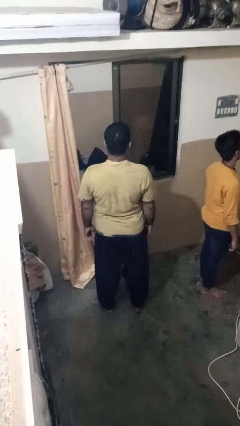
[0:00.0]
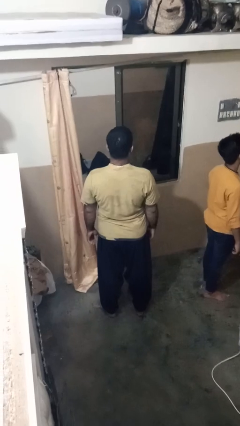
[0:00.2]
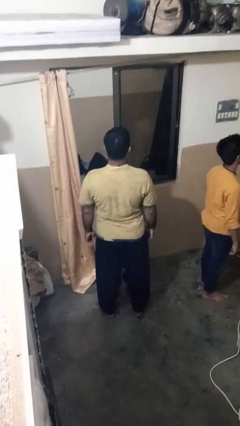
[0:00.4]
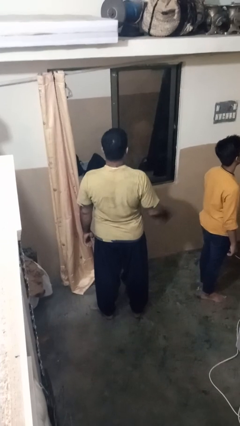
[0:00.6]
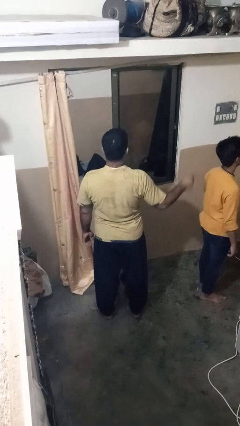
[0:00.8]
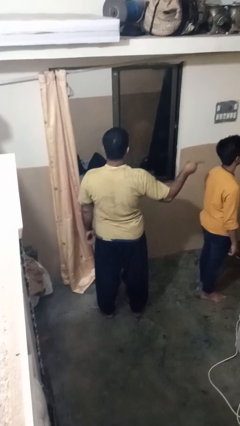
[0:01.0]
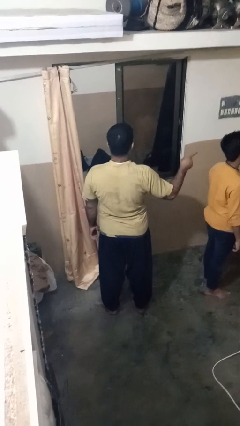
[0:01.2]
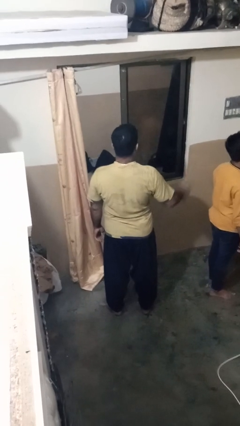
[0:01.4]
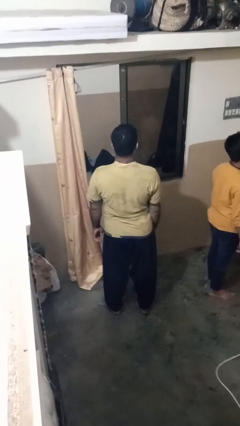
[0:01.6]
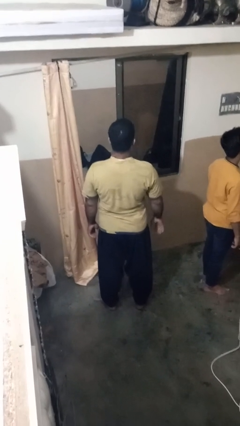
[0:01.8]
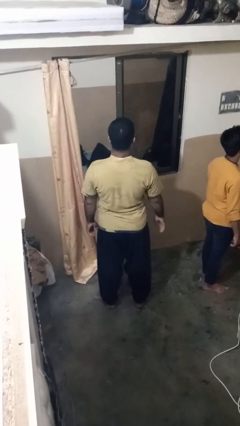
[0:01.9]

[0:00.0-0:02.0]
person points at person

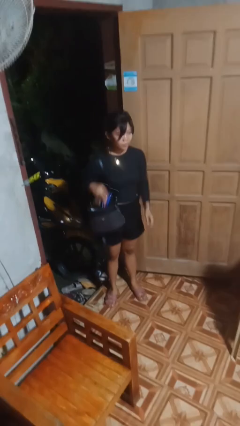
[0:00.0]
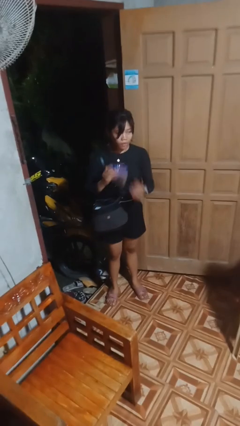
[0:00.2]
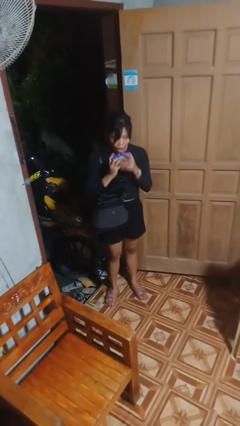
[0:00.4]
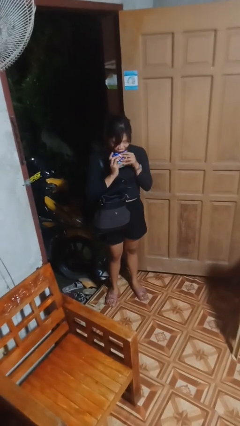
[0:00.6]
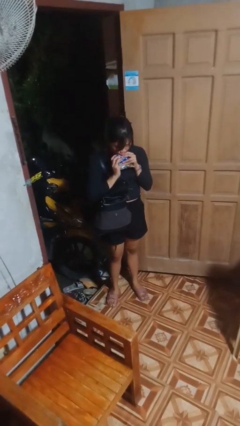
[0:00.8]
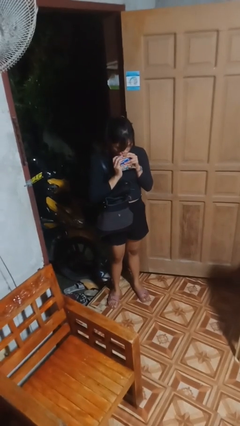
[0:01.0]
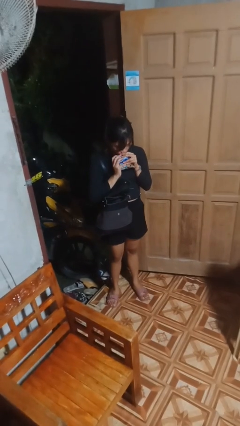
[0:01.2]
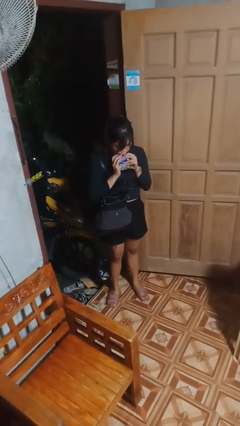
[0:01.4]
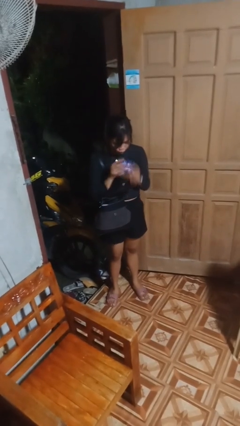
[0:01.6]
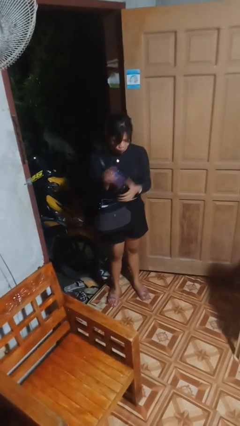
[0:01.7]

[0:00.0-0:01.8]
person eats snack from bag

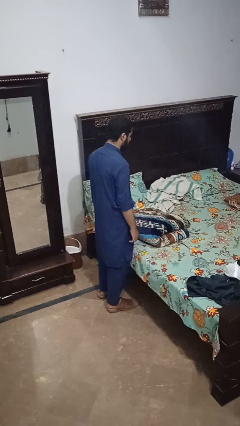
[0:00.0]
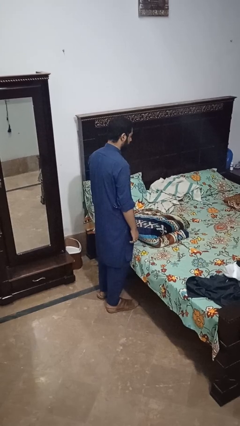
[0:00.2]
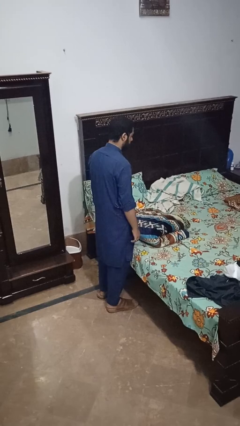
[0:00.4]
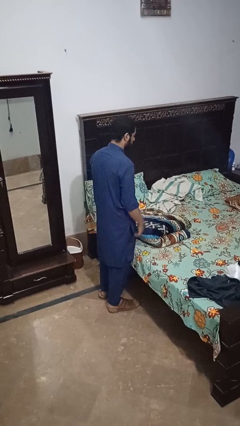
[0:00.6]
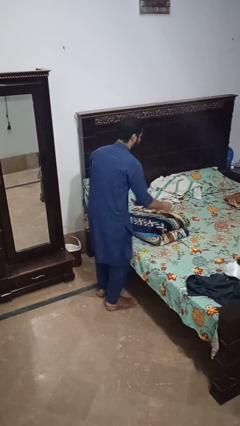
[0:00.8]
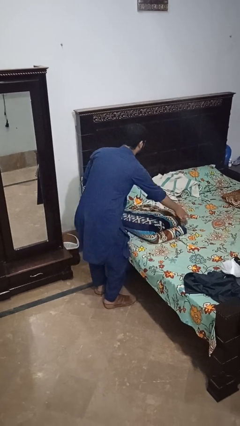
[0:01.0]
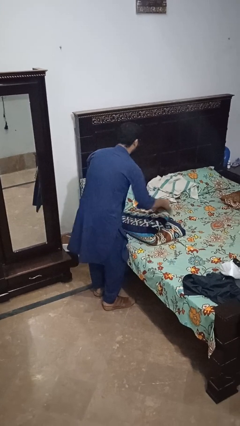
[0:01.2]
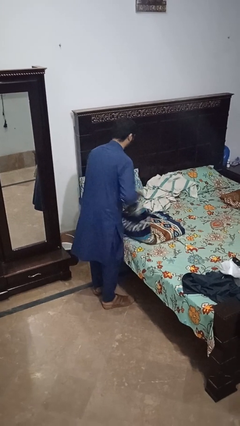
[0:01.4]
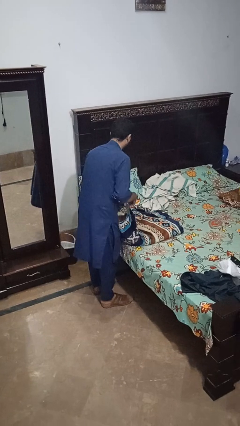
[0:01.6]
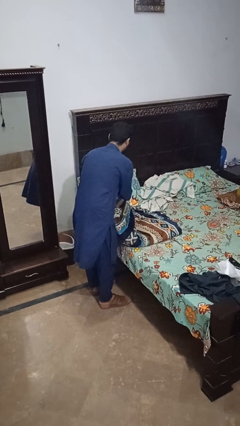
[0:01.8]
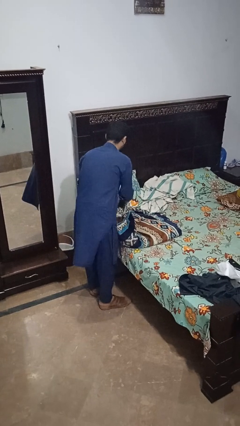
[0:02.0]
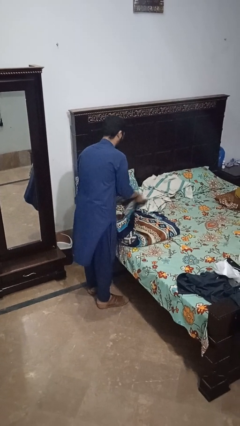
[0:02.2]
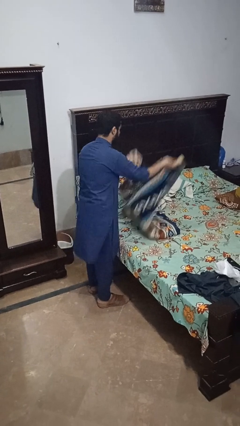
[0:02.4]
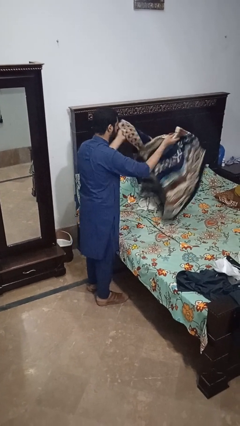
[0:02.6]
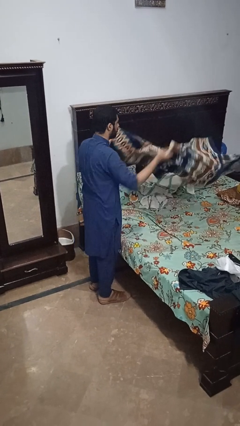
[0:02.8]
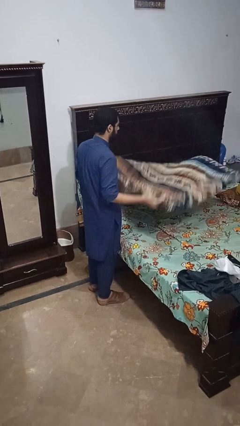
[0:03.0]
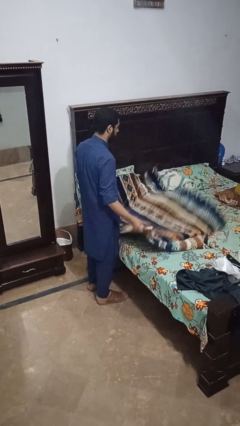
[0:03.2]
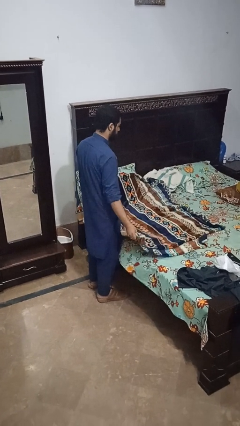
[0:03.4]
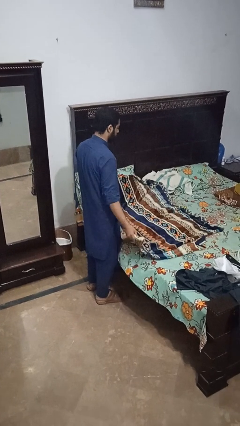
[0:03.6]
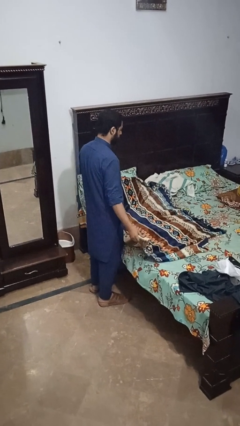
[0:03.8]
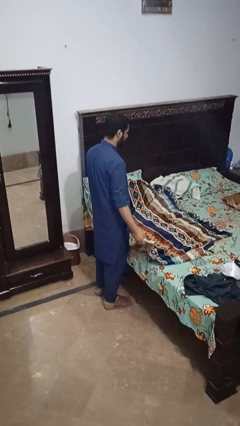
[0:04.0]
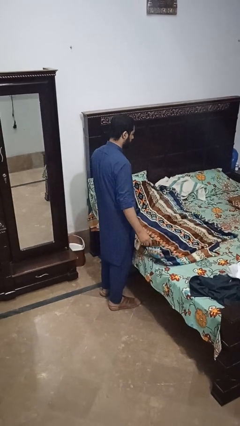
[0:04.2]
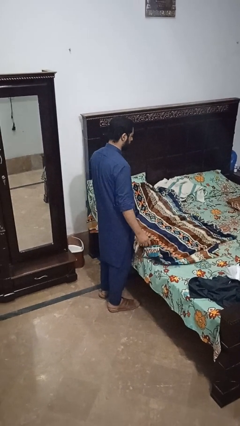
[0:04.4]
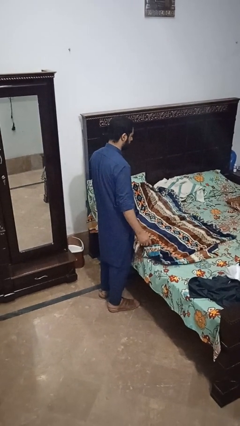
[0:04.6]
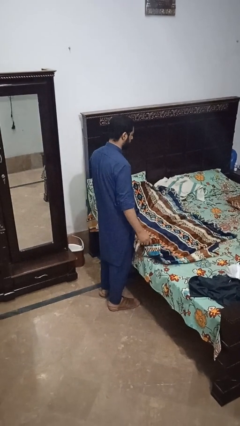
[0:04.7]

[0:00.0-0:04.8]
person unfolds blanket

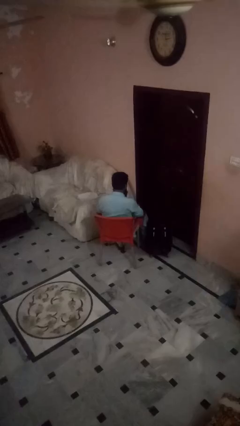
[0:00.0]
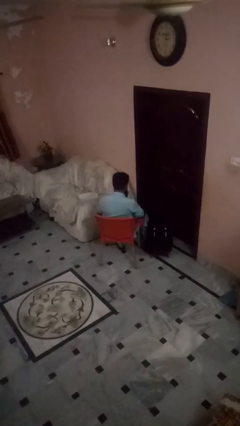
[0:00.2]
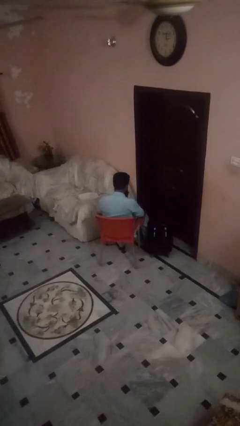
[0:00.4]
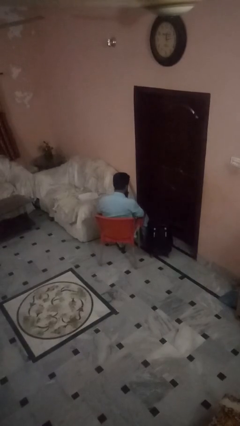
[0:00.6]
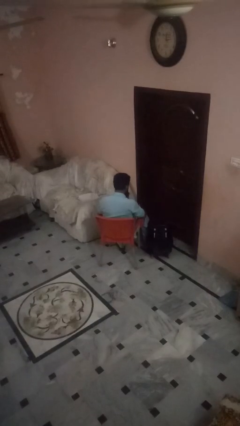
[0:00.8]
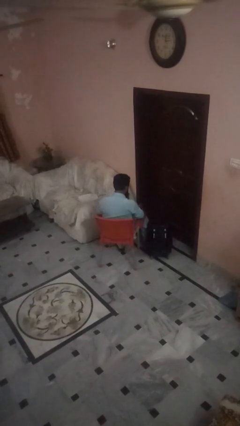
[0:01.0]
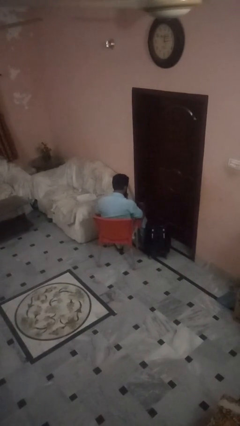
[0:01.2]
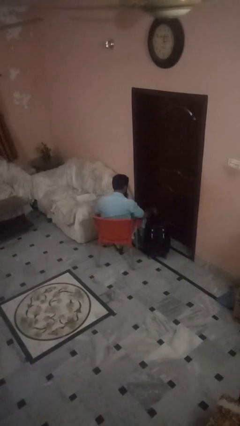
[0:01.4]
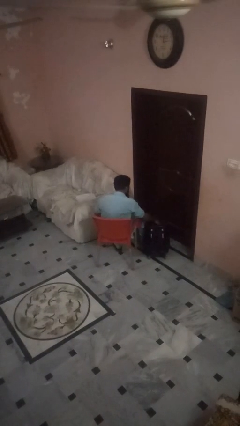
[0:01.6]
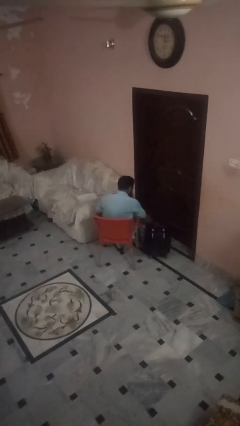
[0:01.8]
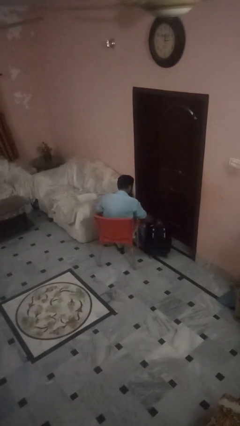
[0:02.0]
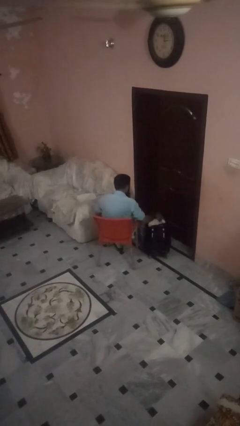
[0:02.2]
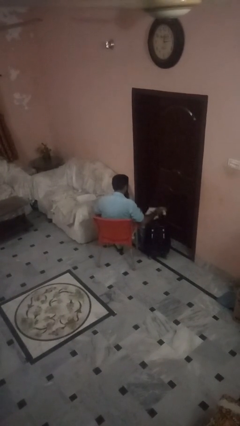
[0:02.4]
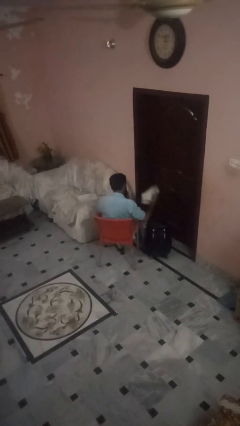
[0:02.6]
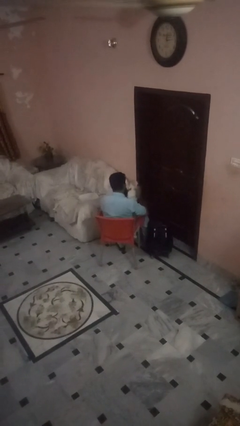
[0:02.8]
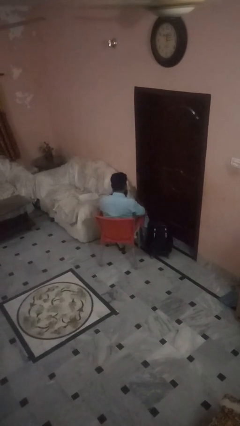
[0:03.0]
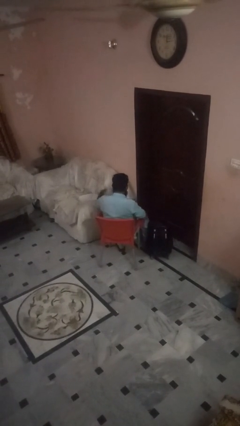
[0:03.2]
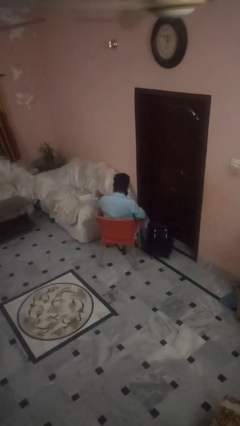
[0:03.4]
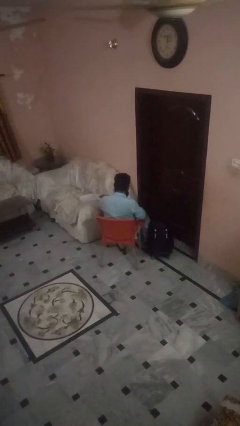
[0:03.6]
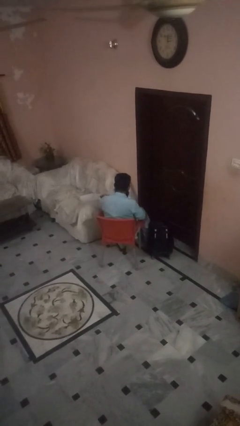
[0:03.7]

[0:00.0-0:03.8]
person unloads clothes from suitcase

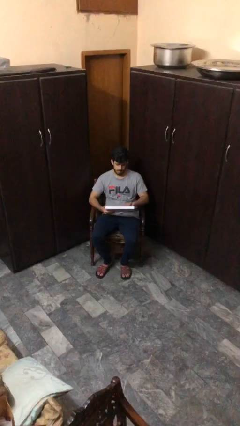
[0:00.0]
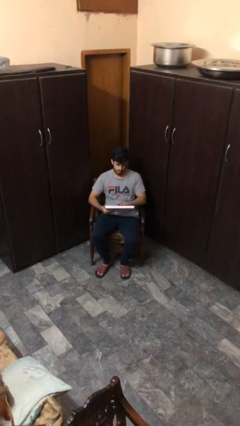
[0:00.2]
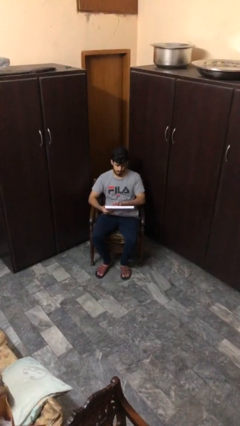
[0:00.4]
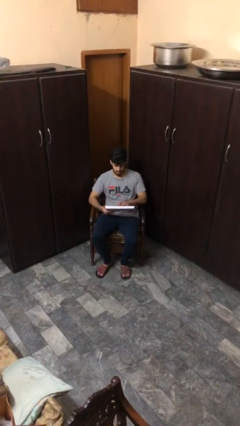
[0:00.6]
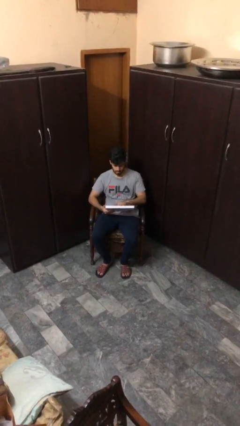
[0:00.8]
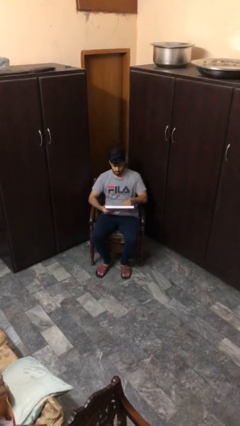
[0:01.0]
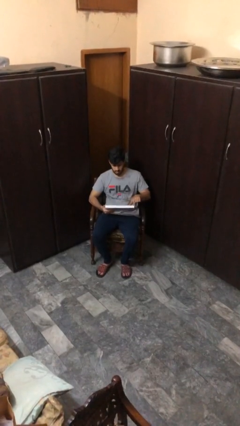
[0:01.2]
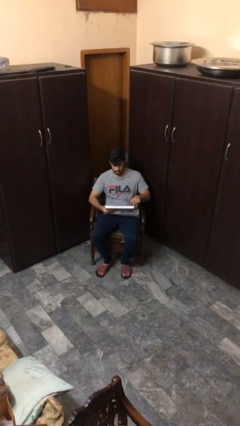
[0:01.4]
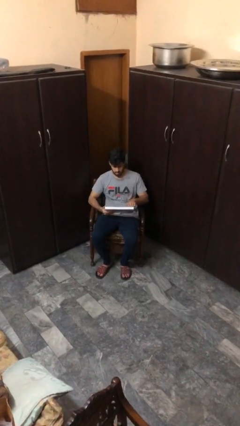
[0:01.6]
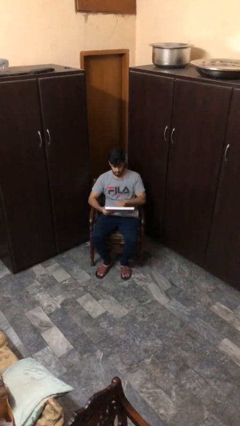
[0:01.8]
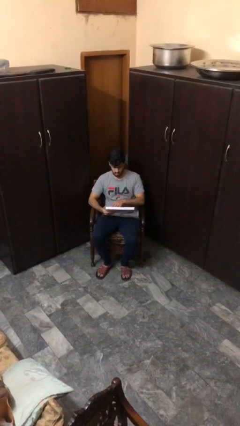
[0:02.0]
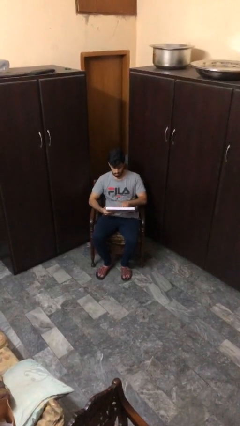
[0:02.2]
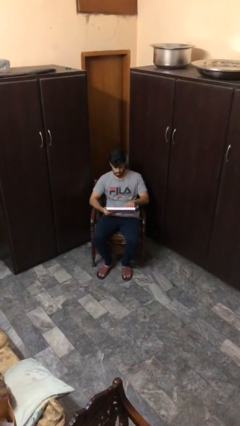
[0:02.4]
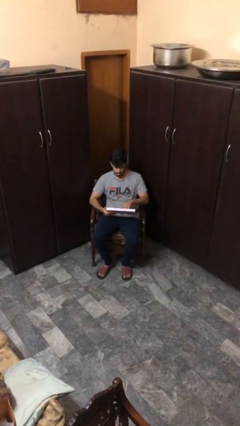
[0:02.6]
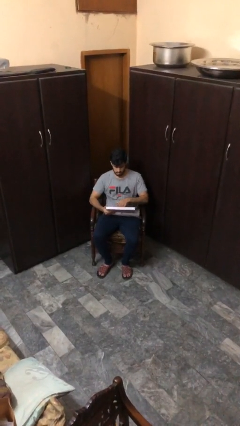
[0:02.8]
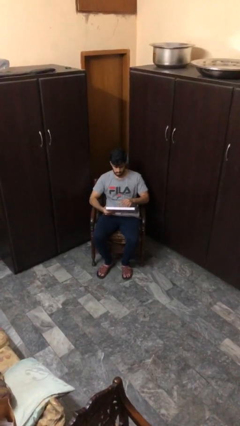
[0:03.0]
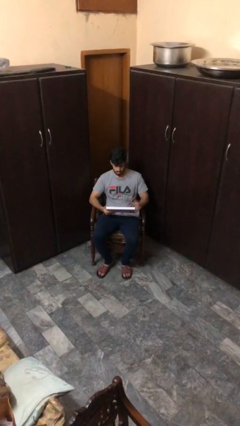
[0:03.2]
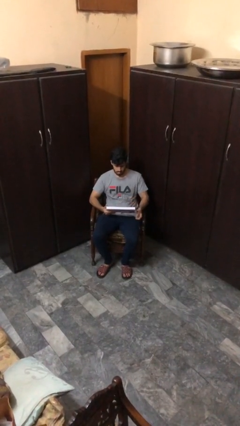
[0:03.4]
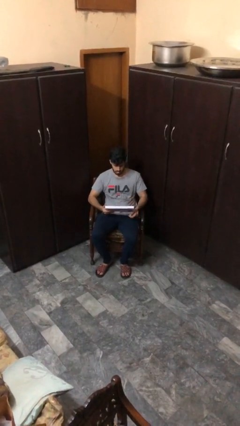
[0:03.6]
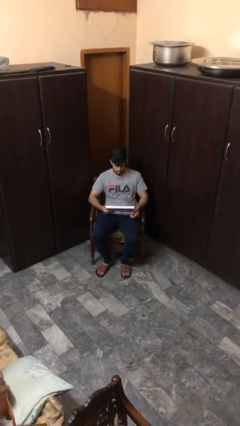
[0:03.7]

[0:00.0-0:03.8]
person interacts with tablet

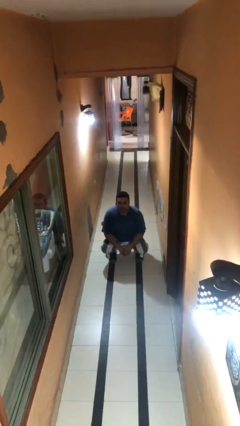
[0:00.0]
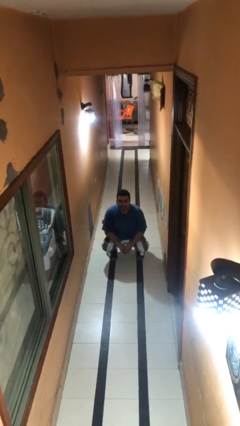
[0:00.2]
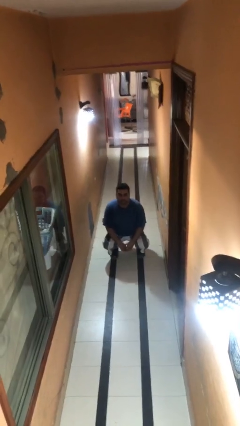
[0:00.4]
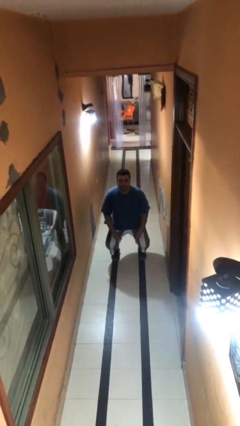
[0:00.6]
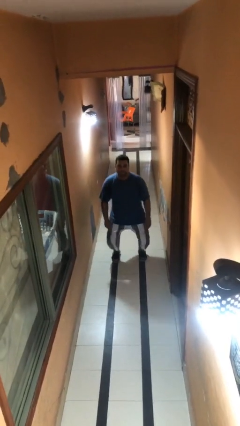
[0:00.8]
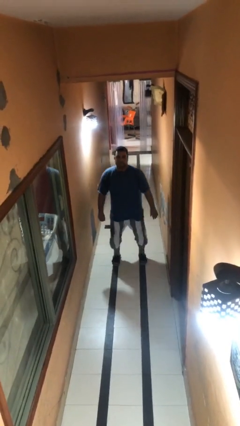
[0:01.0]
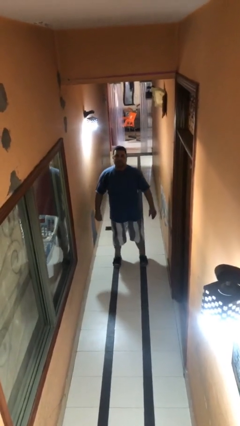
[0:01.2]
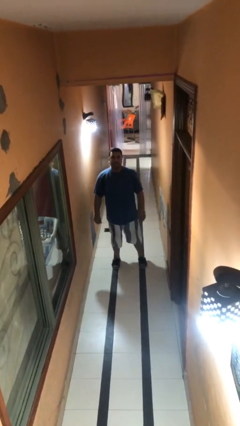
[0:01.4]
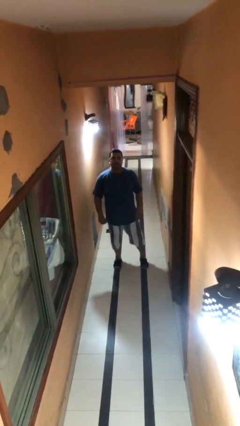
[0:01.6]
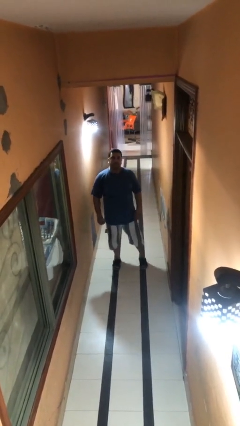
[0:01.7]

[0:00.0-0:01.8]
person stands up
